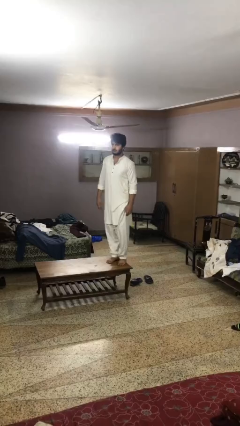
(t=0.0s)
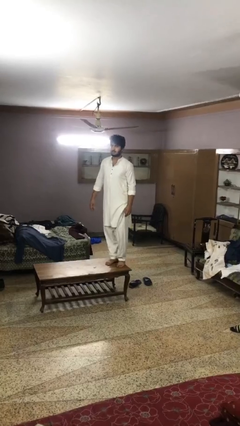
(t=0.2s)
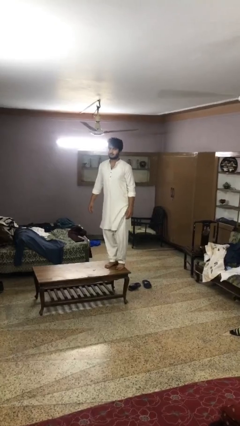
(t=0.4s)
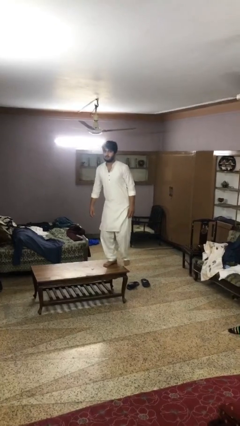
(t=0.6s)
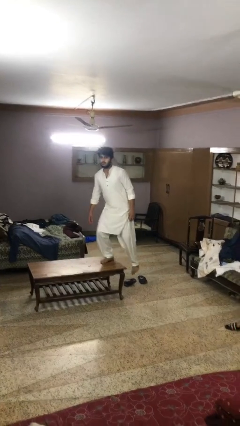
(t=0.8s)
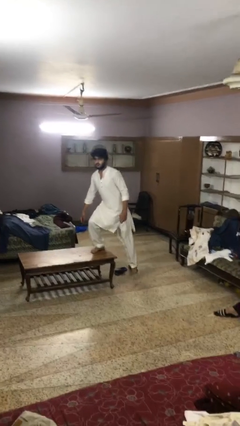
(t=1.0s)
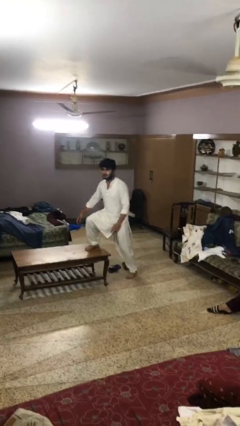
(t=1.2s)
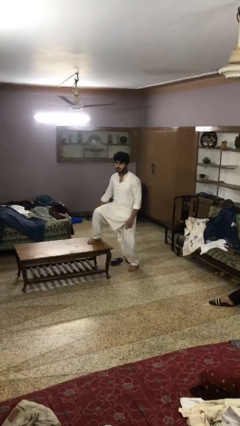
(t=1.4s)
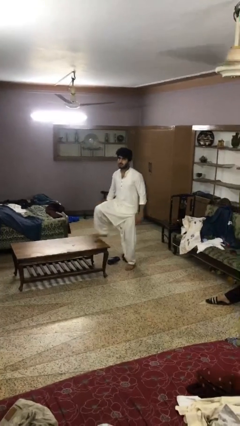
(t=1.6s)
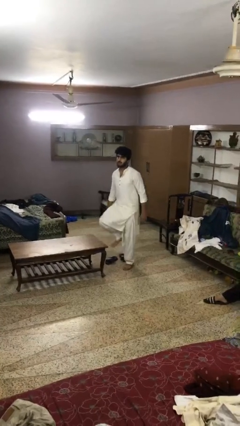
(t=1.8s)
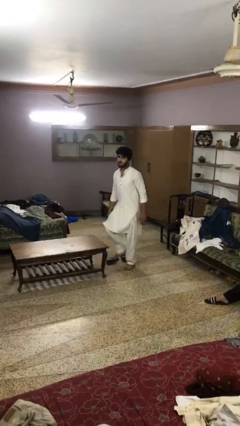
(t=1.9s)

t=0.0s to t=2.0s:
person climbs off table

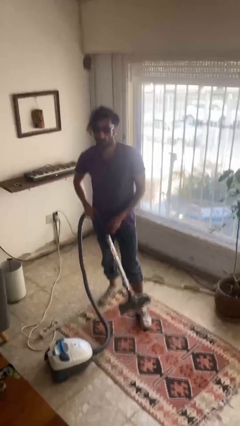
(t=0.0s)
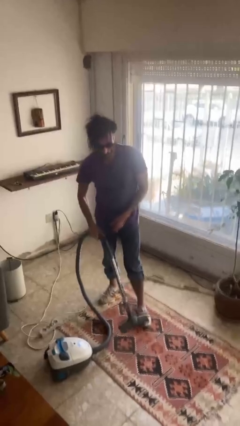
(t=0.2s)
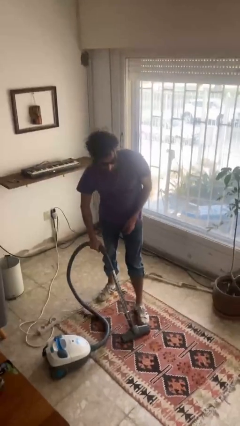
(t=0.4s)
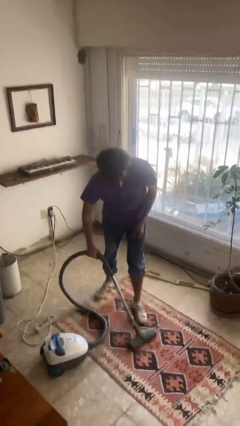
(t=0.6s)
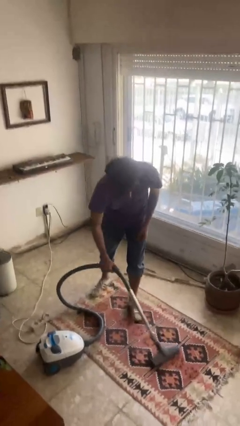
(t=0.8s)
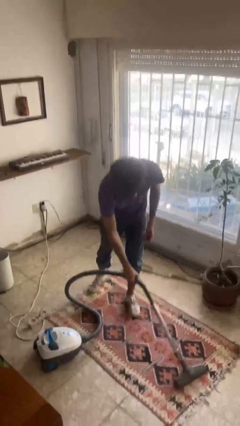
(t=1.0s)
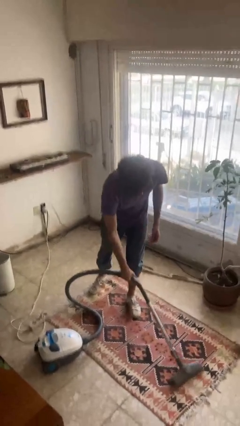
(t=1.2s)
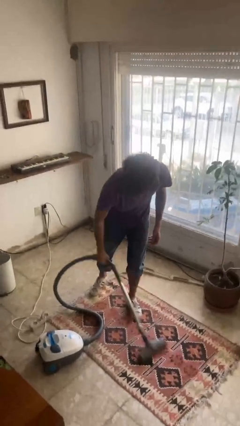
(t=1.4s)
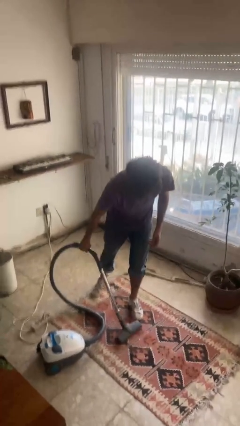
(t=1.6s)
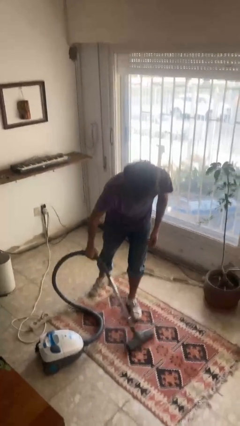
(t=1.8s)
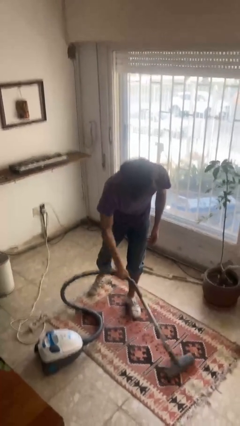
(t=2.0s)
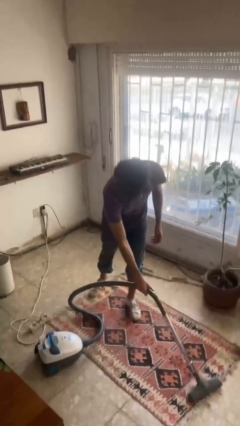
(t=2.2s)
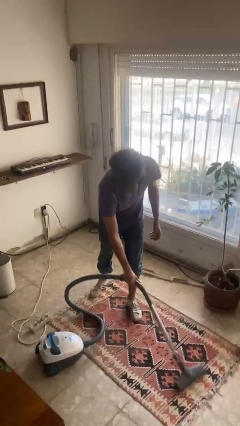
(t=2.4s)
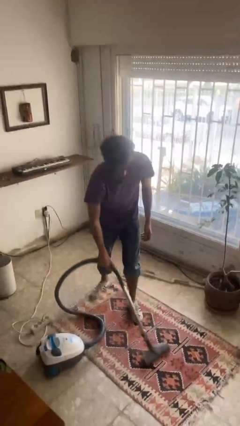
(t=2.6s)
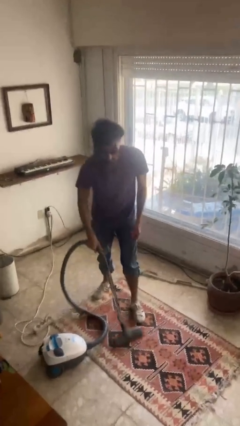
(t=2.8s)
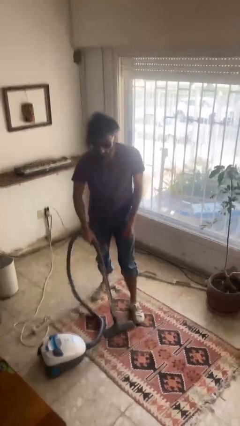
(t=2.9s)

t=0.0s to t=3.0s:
person vacuums carpet

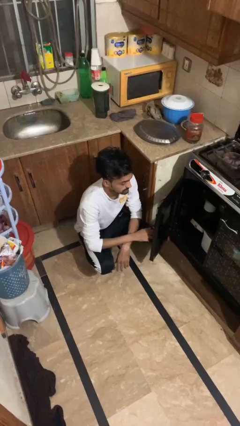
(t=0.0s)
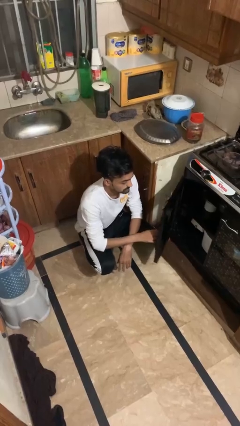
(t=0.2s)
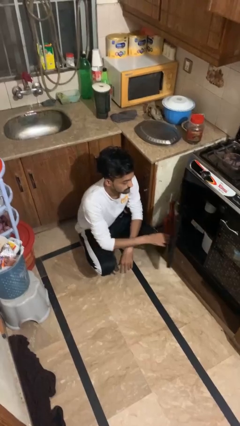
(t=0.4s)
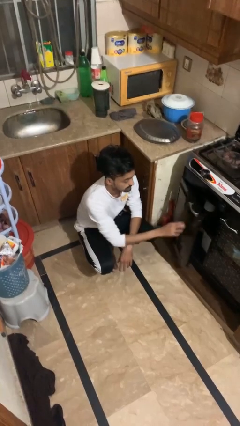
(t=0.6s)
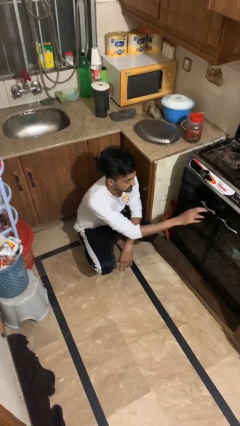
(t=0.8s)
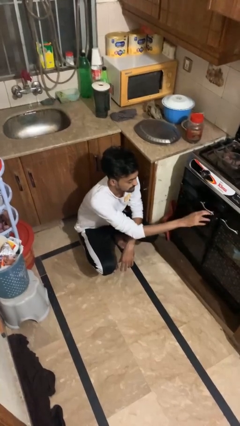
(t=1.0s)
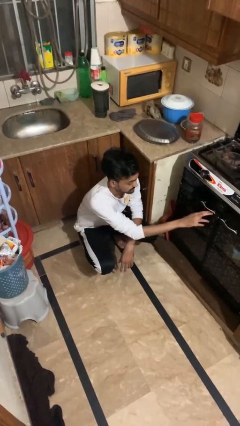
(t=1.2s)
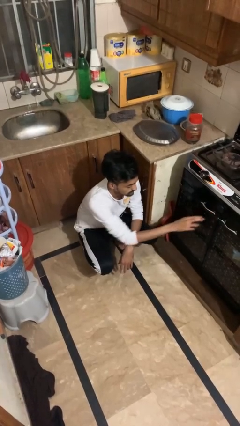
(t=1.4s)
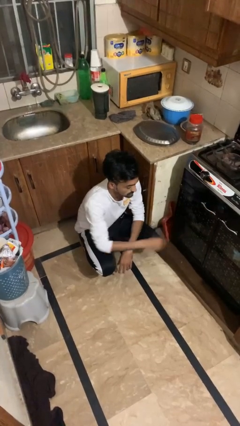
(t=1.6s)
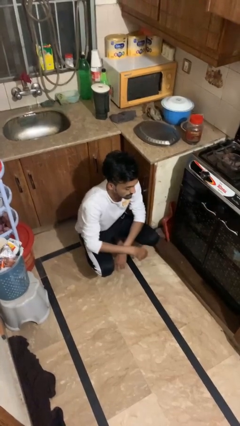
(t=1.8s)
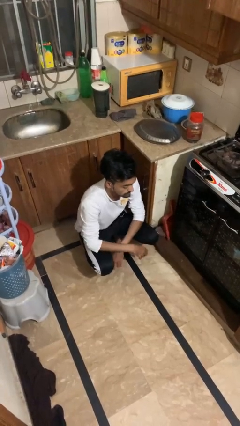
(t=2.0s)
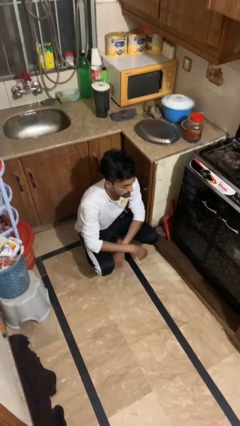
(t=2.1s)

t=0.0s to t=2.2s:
person closes oven door

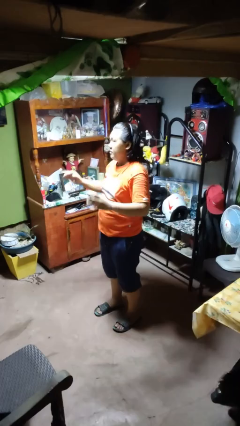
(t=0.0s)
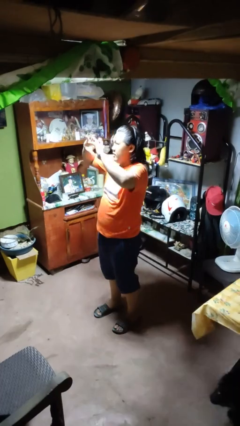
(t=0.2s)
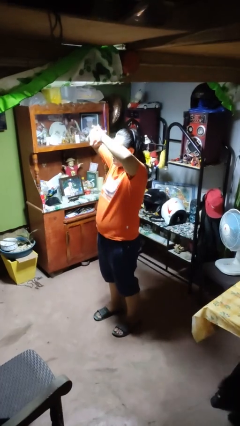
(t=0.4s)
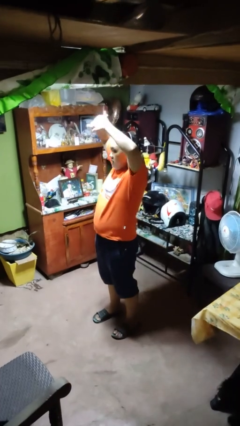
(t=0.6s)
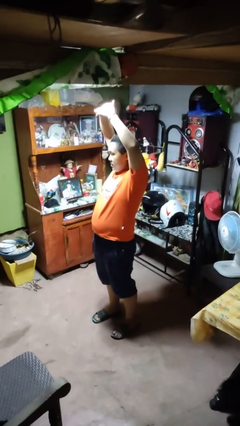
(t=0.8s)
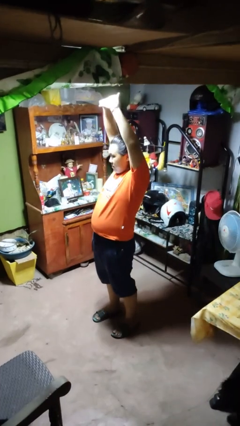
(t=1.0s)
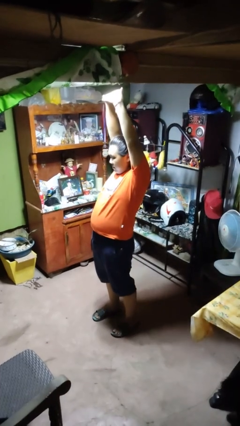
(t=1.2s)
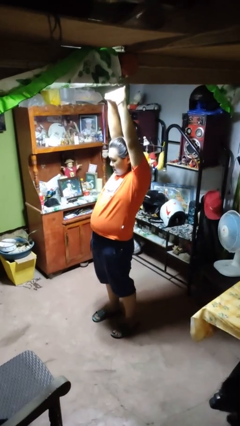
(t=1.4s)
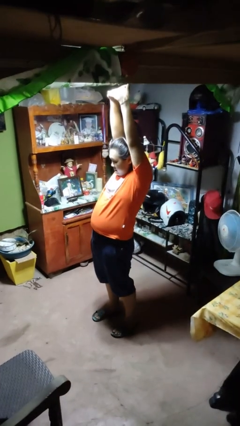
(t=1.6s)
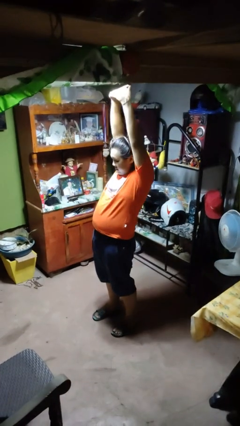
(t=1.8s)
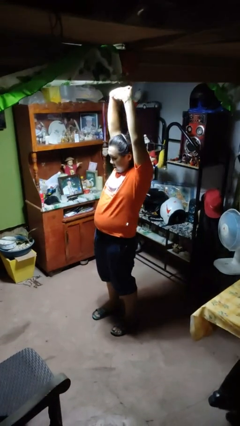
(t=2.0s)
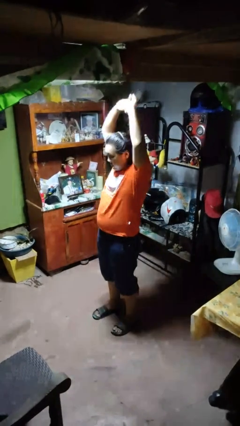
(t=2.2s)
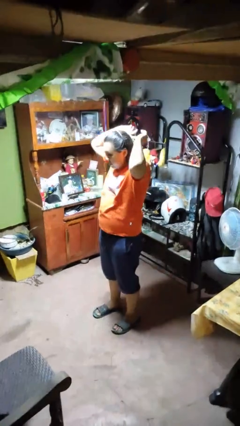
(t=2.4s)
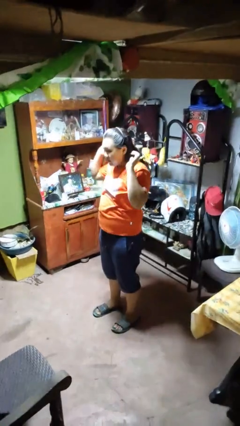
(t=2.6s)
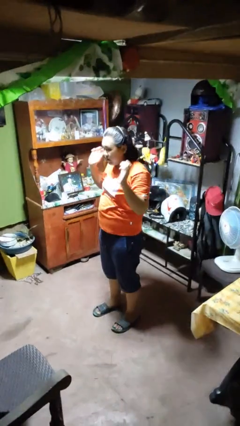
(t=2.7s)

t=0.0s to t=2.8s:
person stretches arms over head

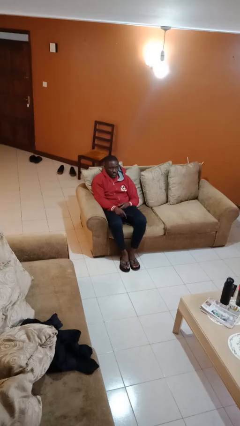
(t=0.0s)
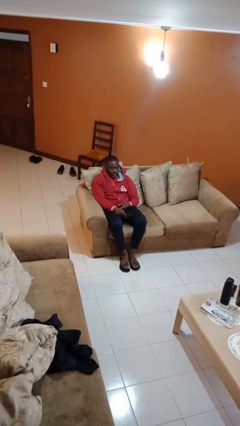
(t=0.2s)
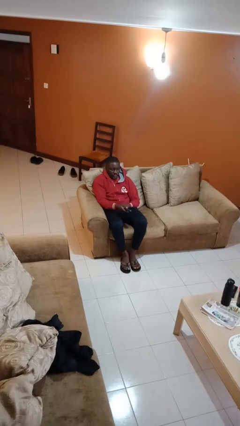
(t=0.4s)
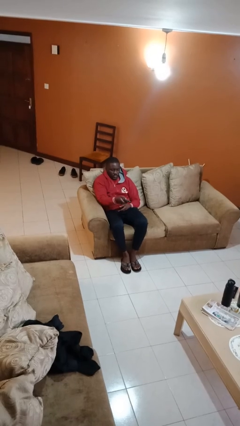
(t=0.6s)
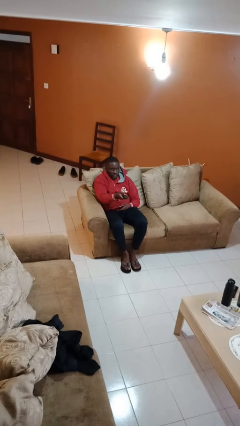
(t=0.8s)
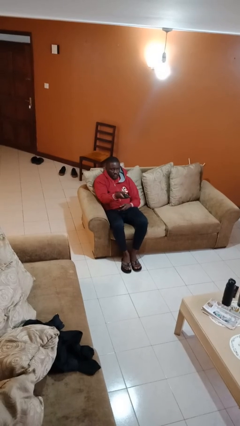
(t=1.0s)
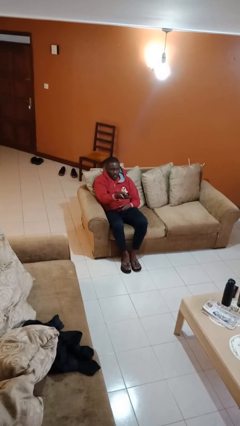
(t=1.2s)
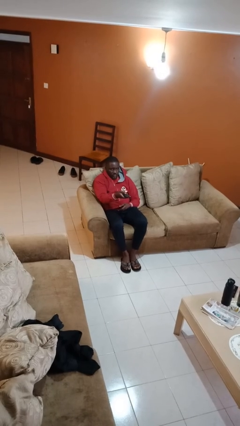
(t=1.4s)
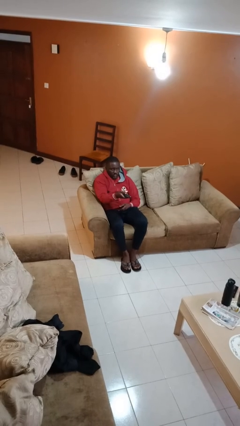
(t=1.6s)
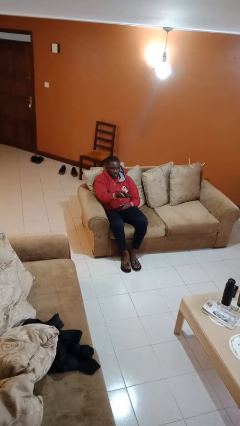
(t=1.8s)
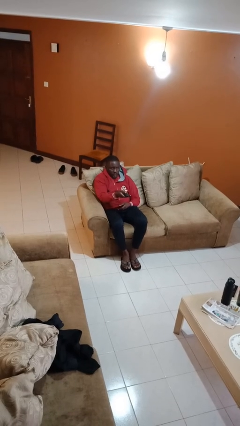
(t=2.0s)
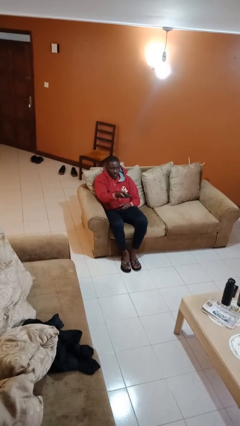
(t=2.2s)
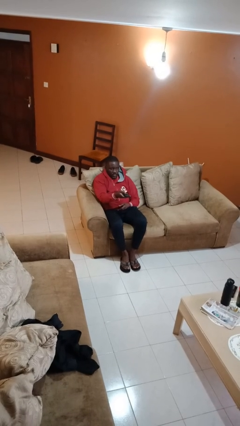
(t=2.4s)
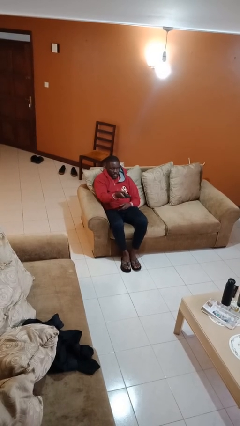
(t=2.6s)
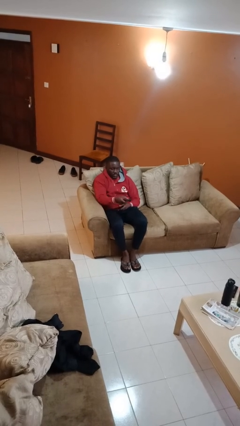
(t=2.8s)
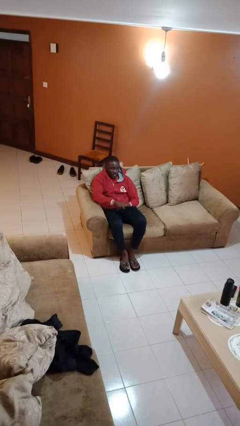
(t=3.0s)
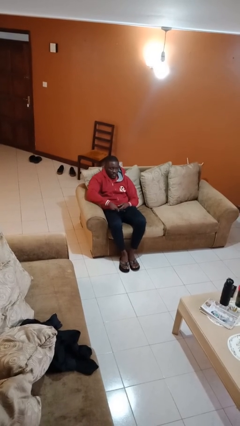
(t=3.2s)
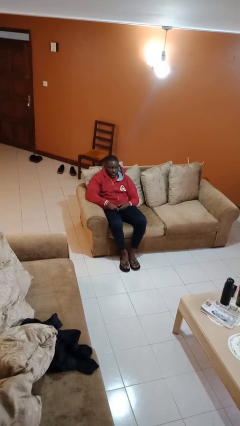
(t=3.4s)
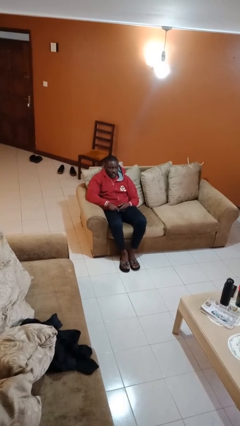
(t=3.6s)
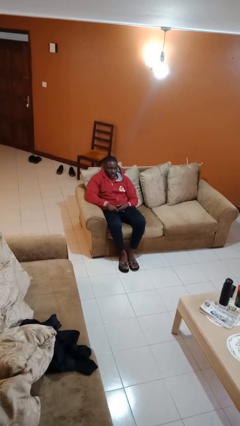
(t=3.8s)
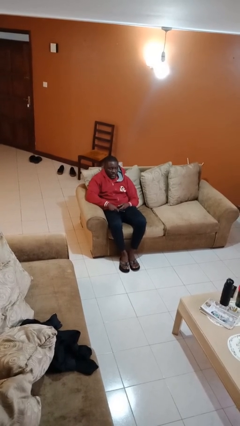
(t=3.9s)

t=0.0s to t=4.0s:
person uses television remote

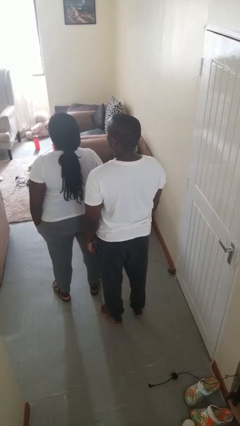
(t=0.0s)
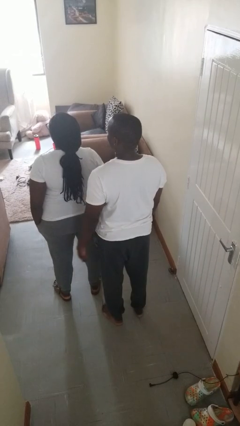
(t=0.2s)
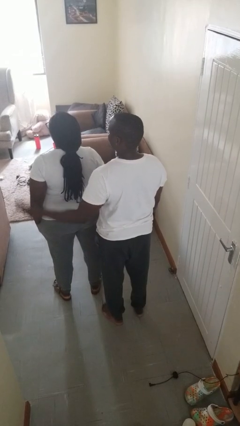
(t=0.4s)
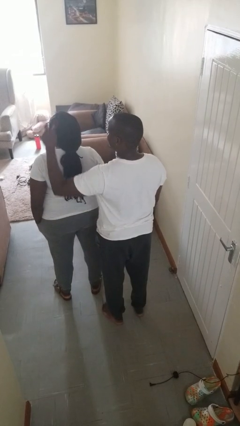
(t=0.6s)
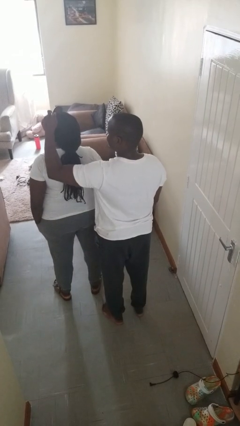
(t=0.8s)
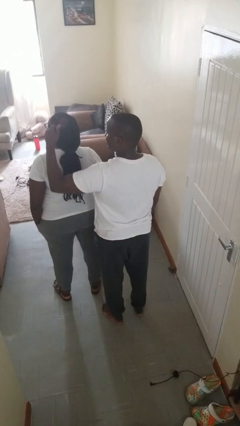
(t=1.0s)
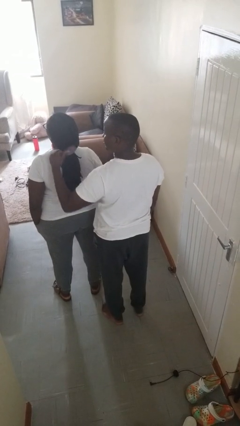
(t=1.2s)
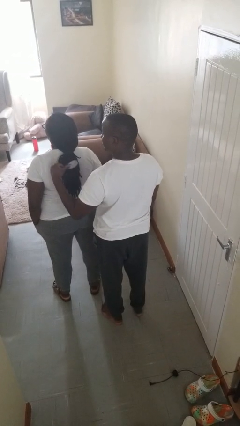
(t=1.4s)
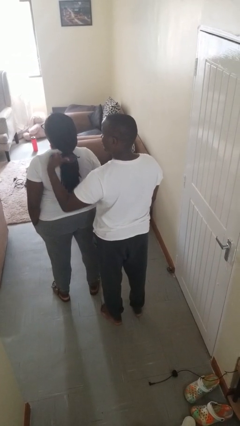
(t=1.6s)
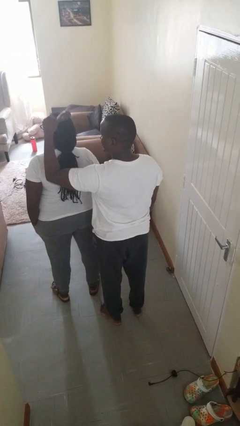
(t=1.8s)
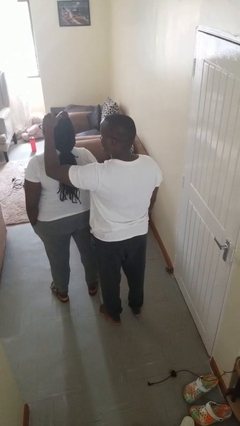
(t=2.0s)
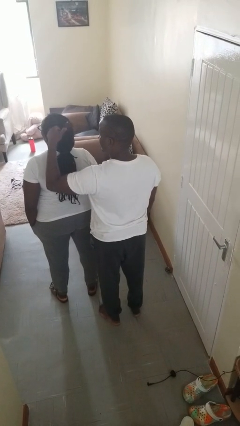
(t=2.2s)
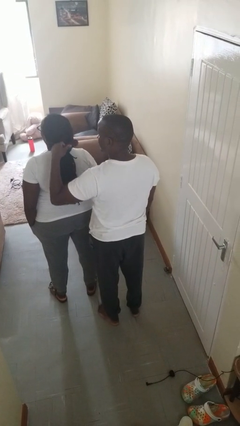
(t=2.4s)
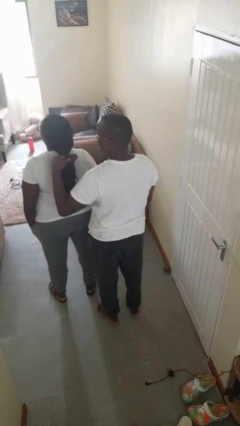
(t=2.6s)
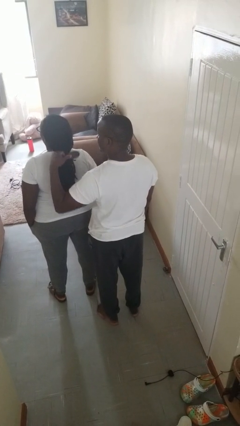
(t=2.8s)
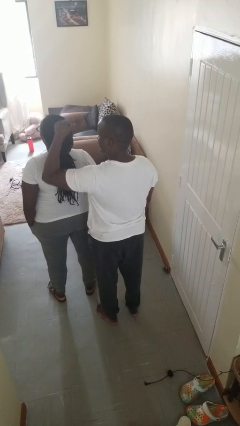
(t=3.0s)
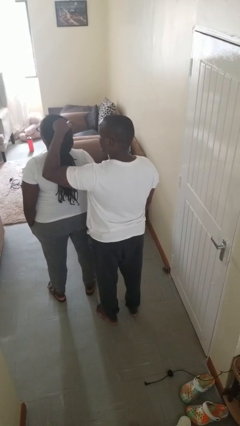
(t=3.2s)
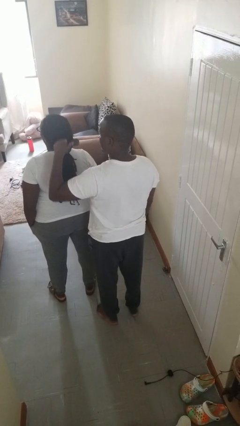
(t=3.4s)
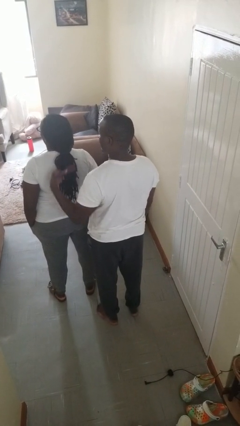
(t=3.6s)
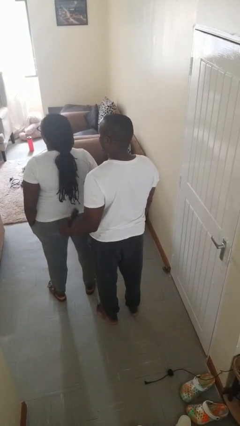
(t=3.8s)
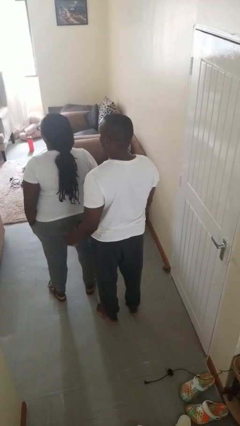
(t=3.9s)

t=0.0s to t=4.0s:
person brushes hair of person
